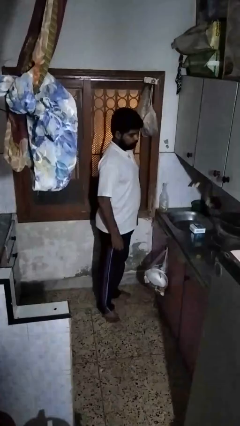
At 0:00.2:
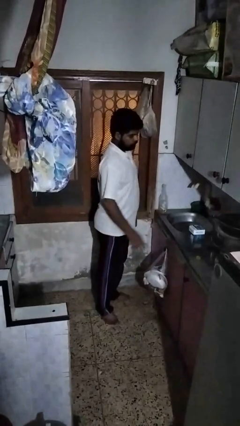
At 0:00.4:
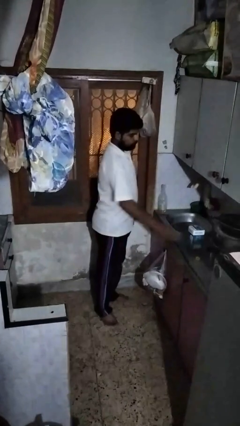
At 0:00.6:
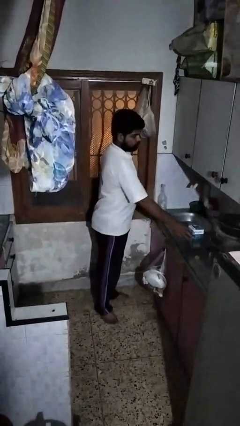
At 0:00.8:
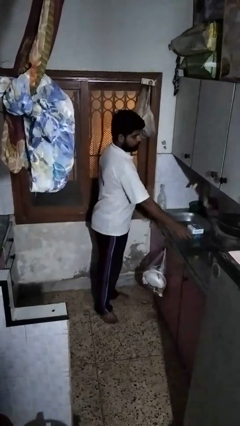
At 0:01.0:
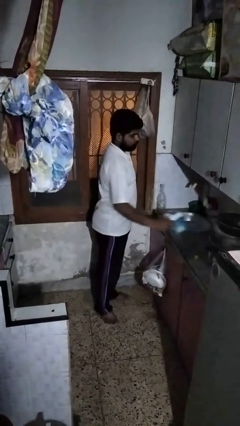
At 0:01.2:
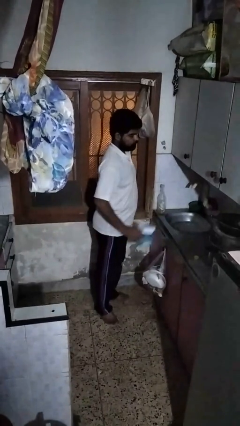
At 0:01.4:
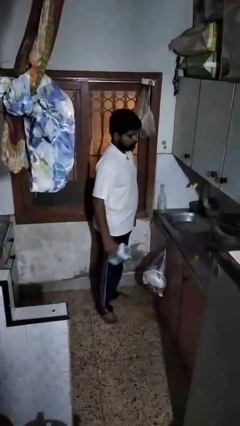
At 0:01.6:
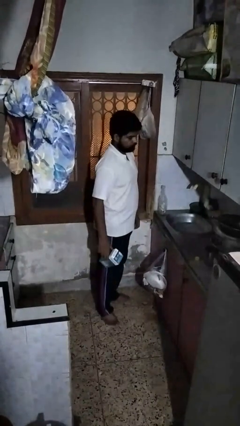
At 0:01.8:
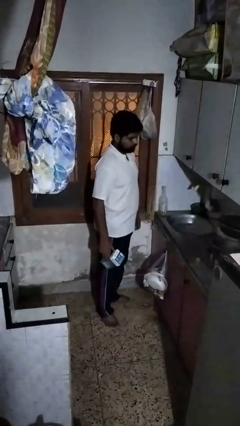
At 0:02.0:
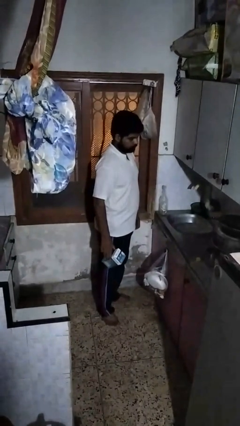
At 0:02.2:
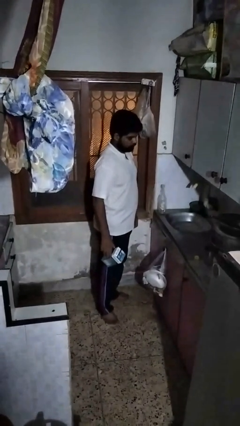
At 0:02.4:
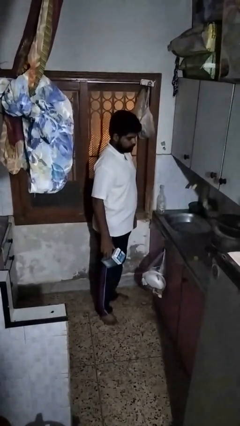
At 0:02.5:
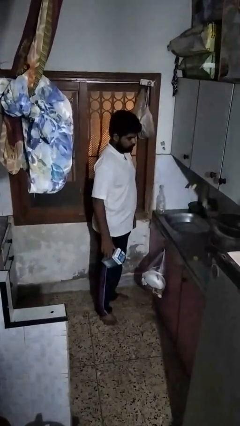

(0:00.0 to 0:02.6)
person picks up object from countertop

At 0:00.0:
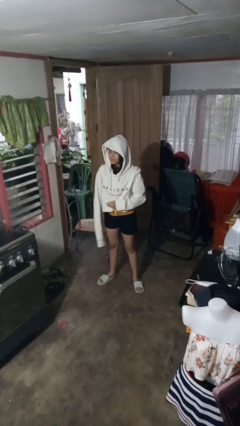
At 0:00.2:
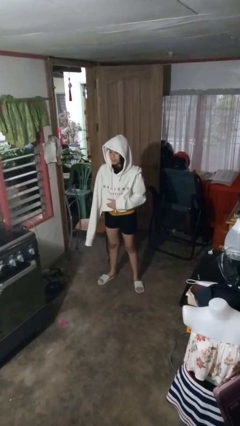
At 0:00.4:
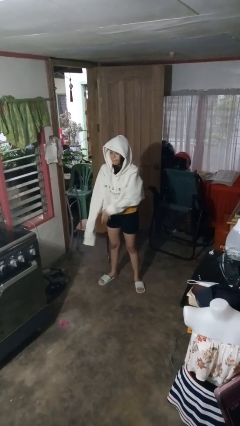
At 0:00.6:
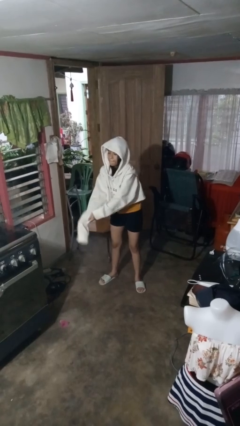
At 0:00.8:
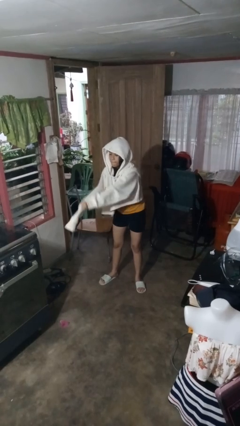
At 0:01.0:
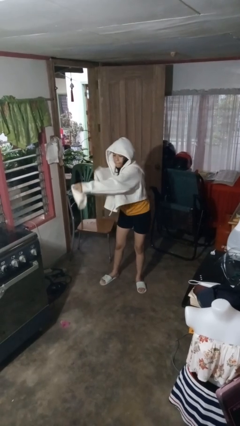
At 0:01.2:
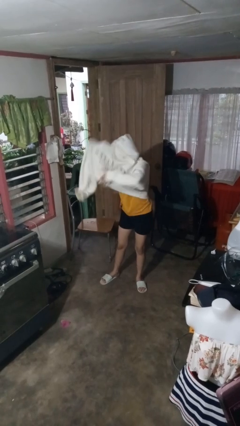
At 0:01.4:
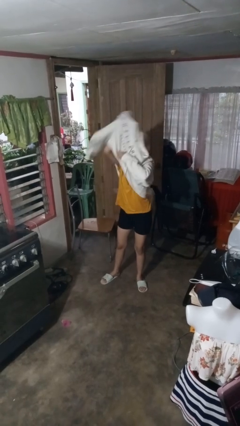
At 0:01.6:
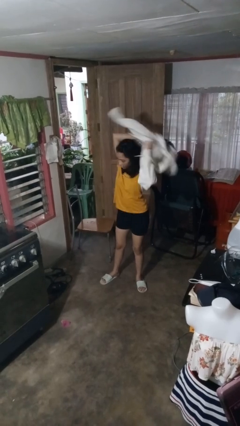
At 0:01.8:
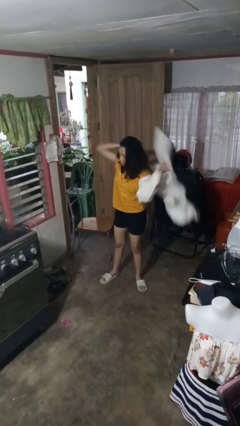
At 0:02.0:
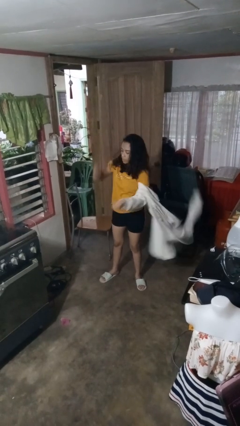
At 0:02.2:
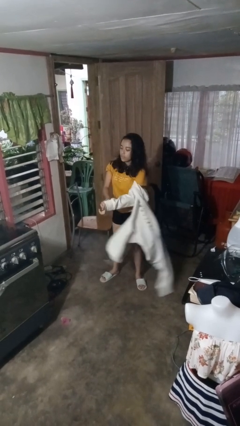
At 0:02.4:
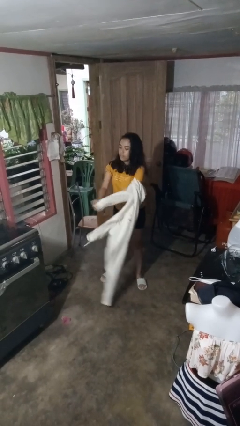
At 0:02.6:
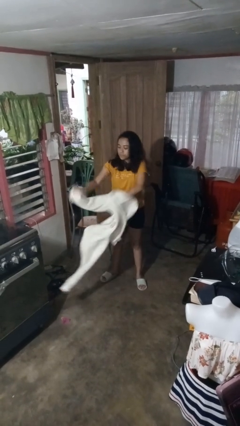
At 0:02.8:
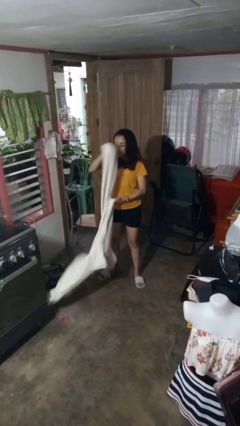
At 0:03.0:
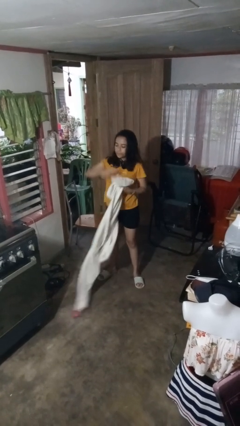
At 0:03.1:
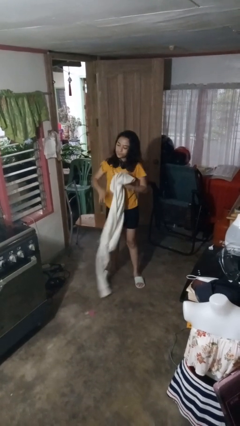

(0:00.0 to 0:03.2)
person takes off hoodie

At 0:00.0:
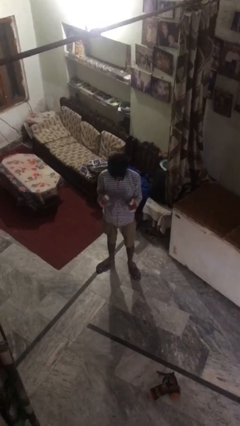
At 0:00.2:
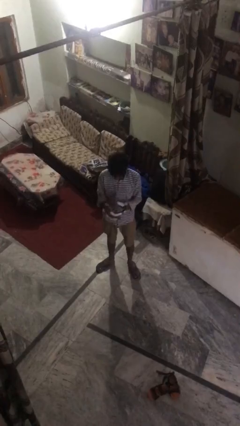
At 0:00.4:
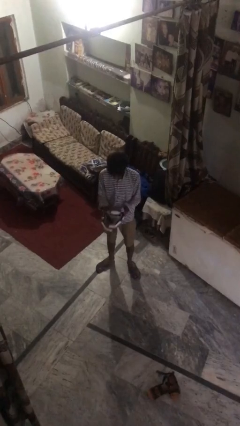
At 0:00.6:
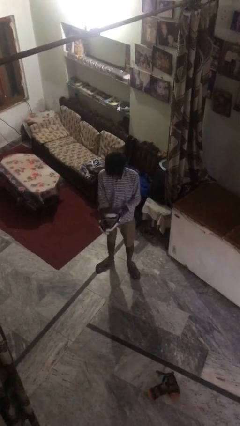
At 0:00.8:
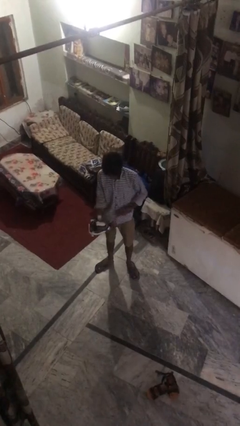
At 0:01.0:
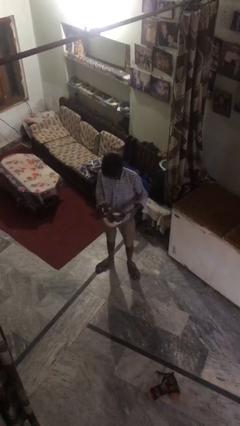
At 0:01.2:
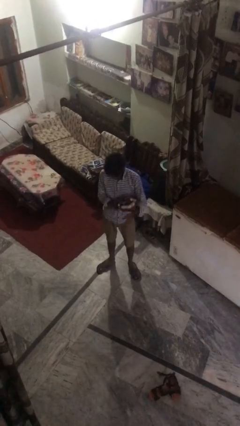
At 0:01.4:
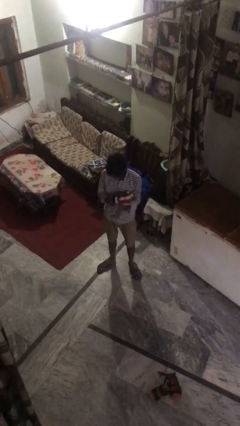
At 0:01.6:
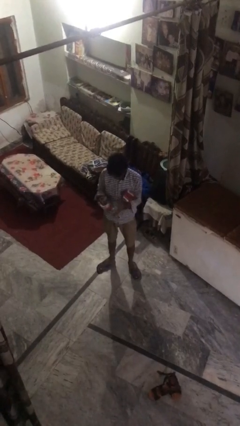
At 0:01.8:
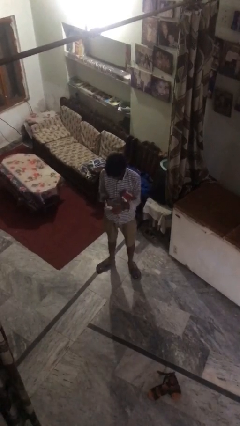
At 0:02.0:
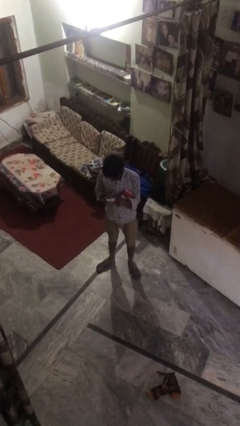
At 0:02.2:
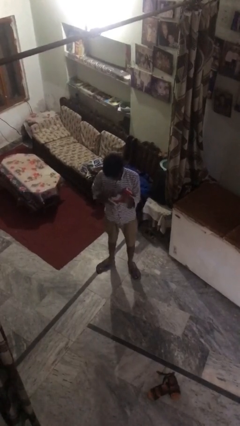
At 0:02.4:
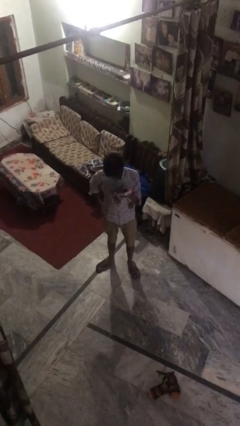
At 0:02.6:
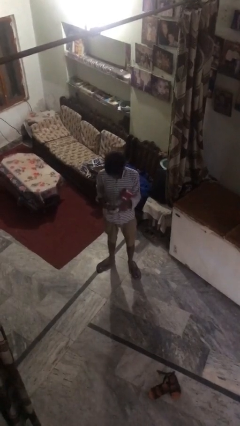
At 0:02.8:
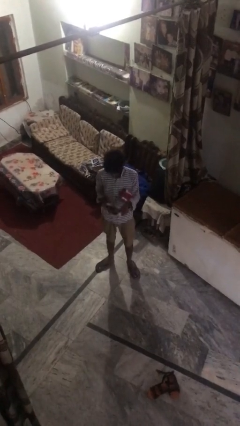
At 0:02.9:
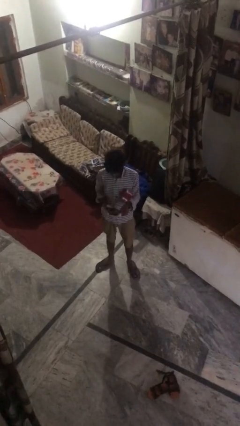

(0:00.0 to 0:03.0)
person takes off gloves

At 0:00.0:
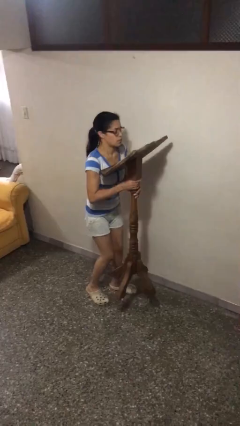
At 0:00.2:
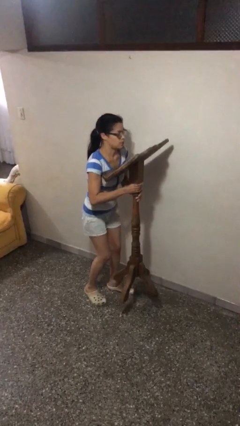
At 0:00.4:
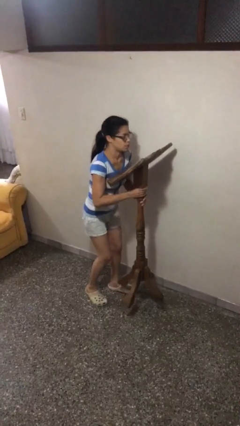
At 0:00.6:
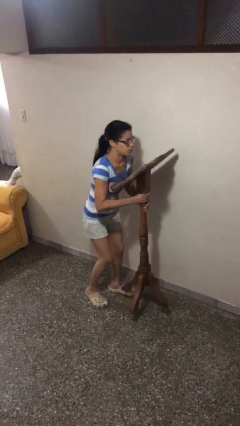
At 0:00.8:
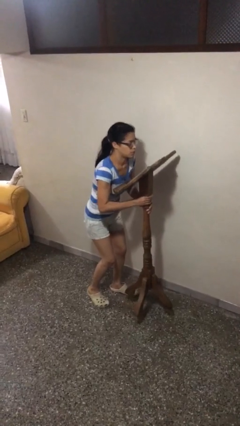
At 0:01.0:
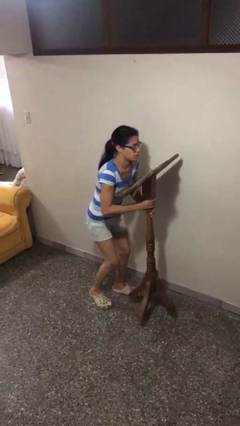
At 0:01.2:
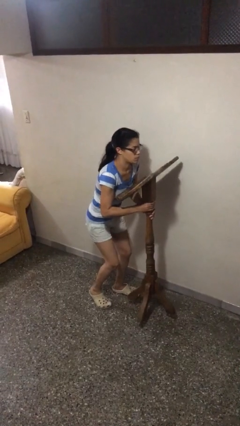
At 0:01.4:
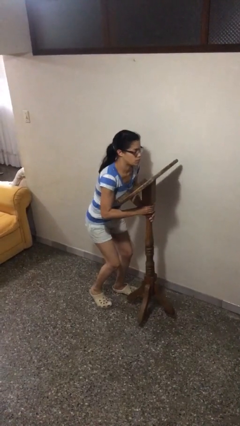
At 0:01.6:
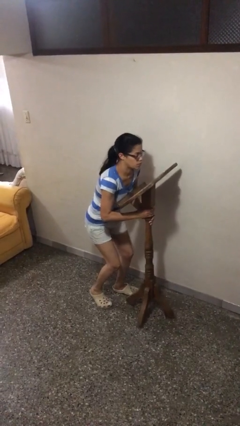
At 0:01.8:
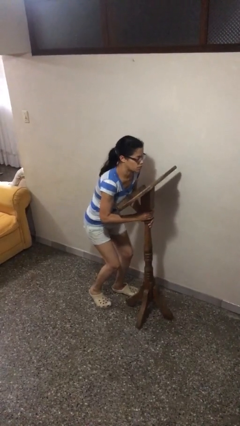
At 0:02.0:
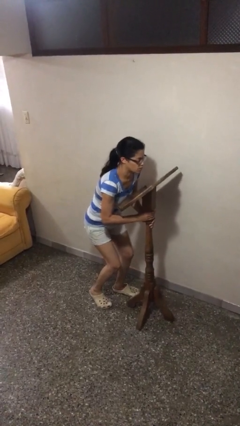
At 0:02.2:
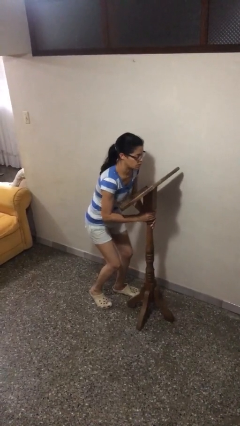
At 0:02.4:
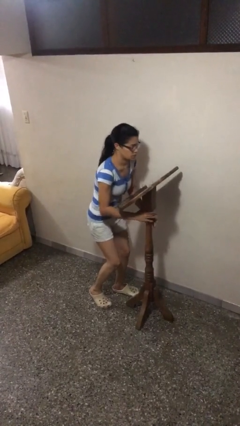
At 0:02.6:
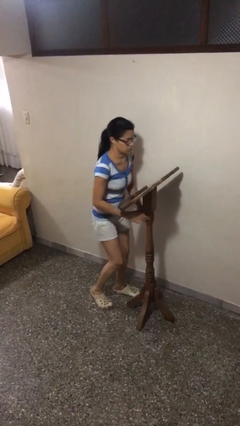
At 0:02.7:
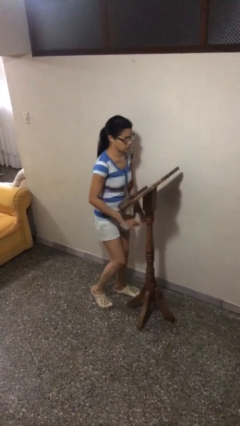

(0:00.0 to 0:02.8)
person puts down object on floor

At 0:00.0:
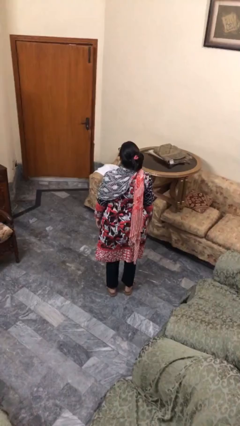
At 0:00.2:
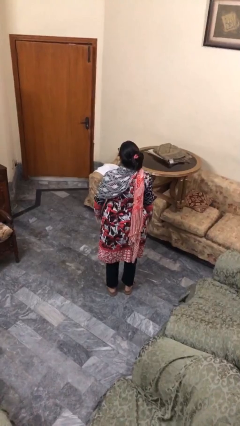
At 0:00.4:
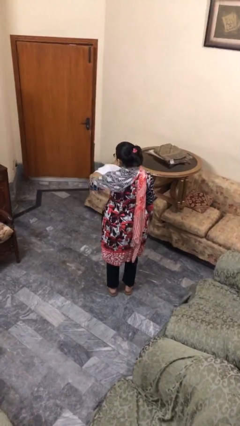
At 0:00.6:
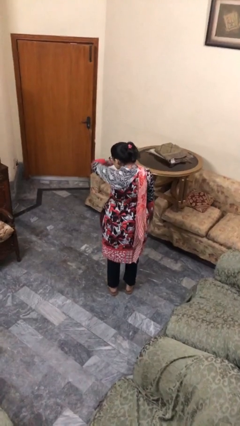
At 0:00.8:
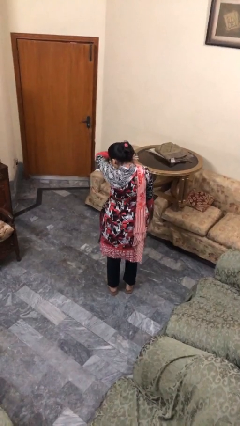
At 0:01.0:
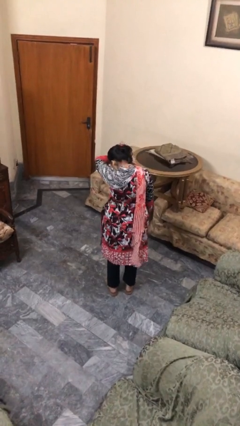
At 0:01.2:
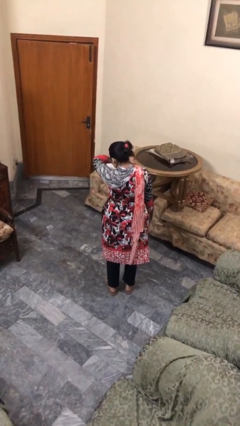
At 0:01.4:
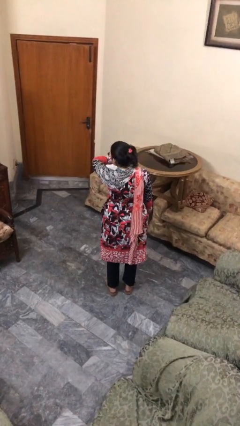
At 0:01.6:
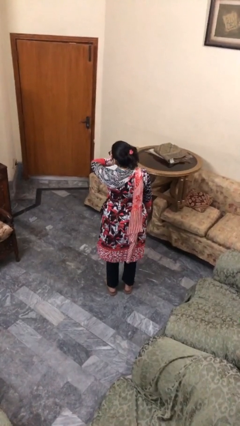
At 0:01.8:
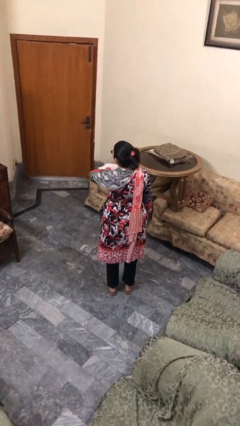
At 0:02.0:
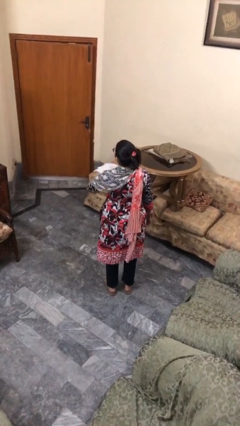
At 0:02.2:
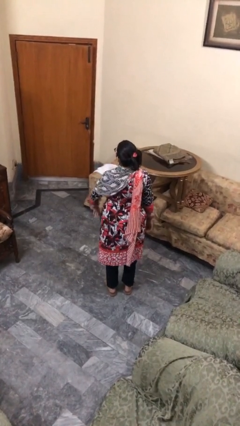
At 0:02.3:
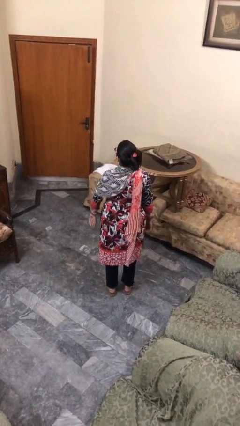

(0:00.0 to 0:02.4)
person sneezes into arm

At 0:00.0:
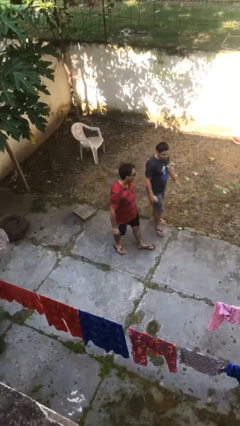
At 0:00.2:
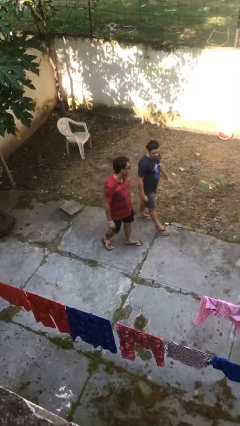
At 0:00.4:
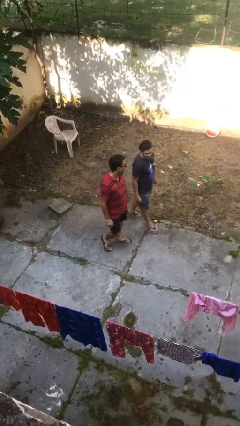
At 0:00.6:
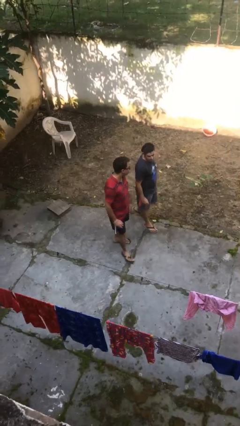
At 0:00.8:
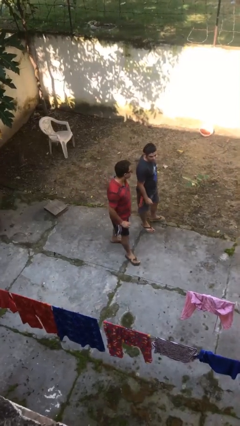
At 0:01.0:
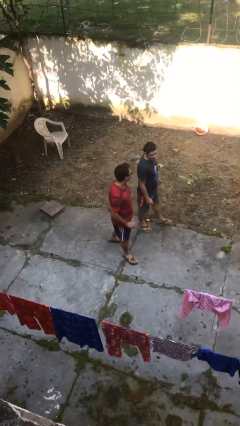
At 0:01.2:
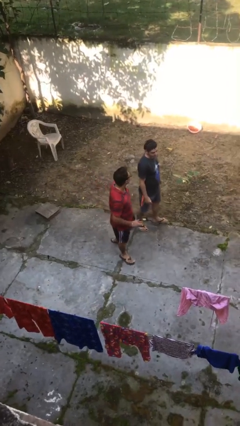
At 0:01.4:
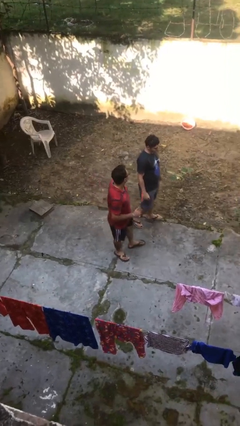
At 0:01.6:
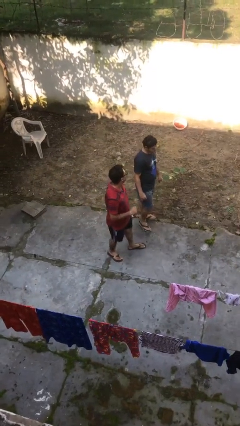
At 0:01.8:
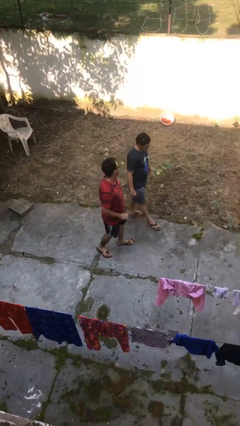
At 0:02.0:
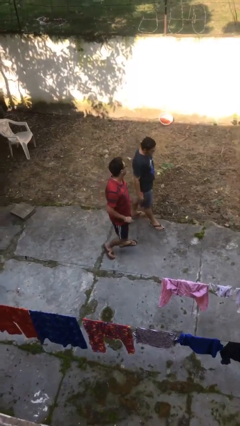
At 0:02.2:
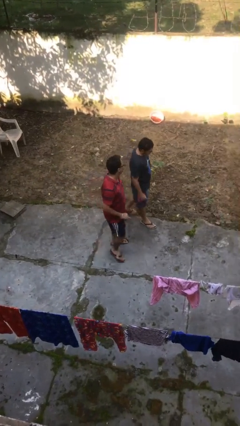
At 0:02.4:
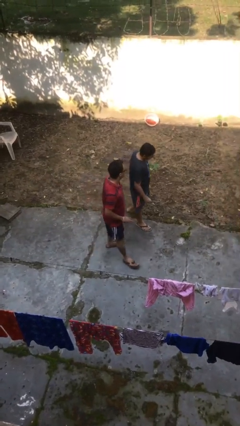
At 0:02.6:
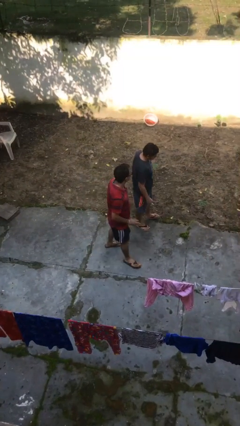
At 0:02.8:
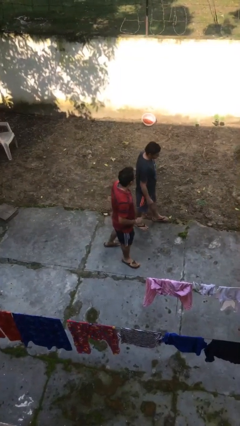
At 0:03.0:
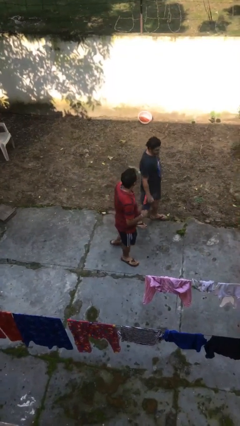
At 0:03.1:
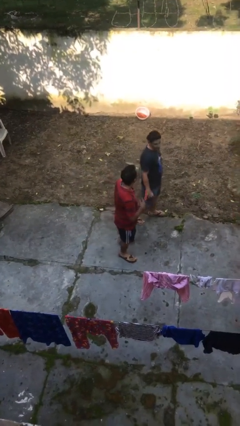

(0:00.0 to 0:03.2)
person talks to person

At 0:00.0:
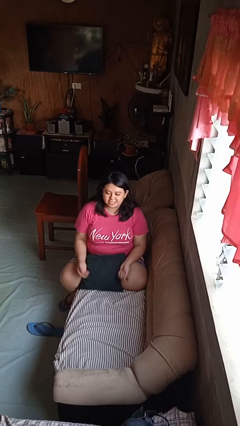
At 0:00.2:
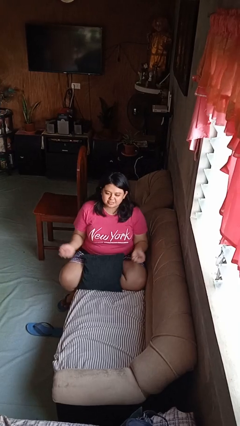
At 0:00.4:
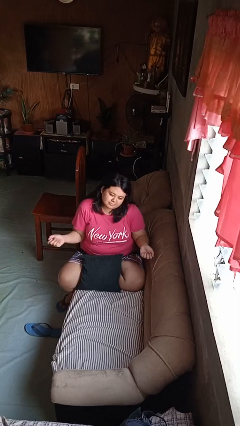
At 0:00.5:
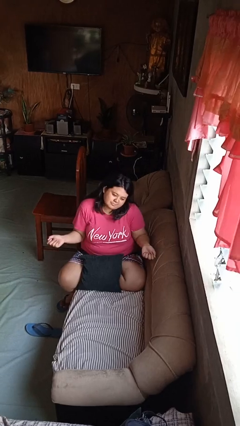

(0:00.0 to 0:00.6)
person shrugs
